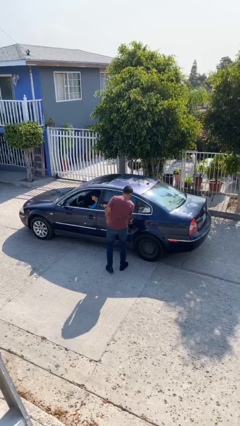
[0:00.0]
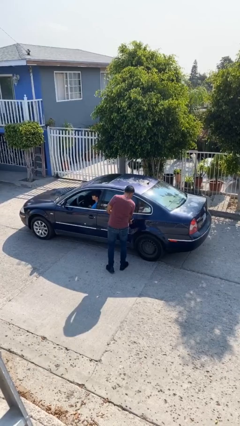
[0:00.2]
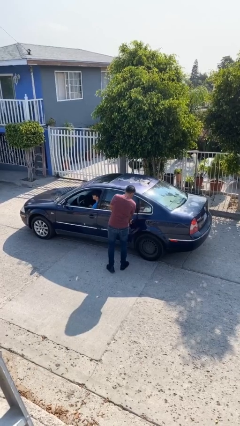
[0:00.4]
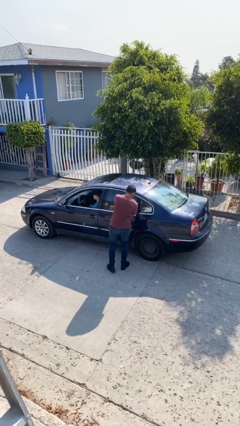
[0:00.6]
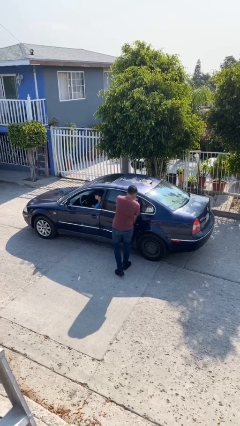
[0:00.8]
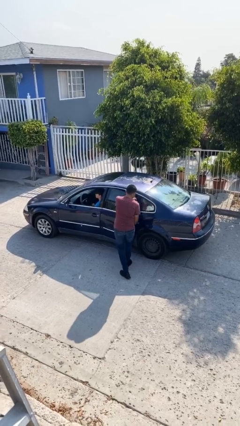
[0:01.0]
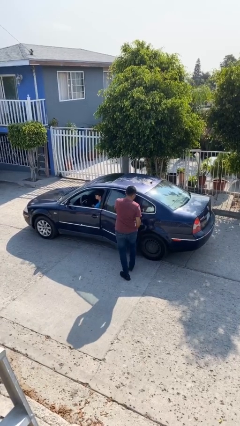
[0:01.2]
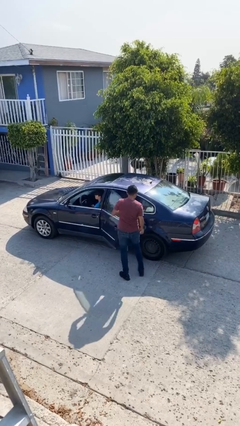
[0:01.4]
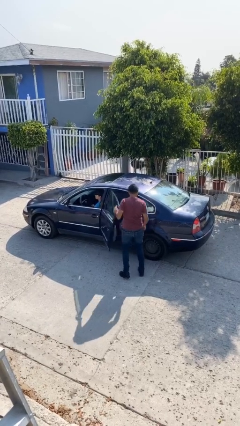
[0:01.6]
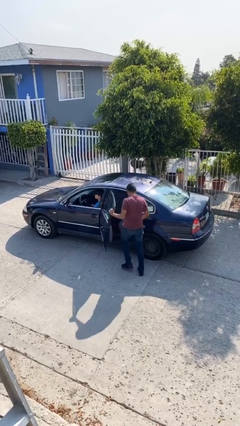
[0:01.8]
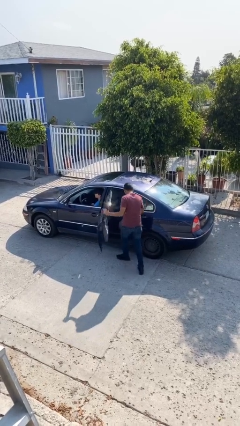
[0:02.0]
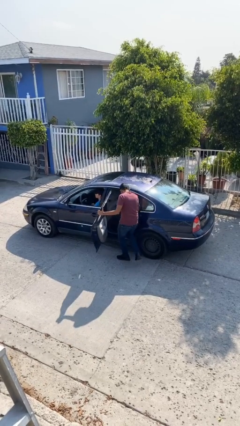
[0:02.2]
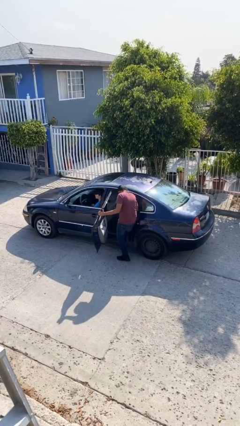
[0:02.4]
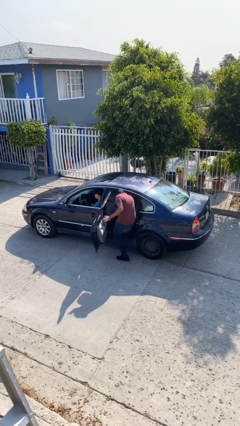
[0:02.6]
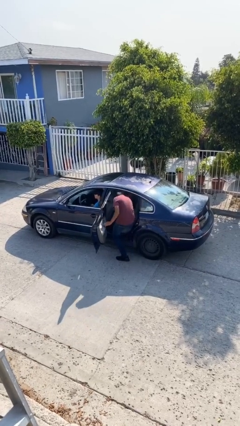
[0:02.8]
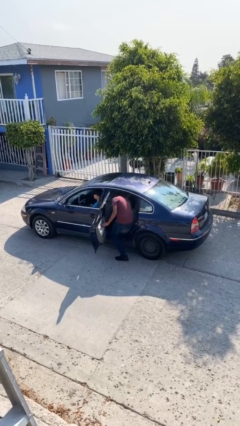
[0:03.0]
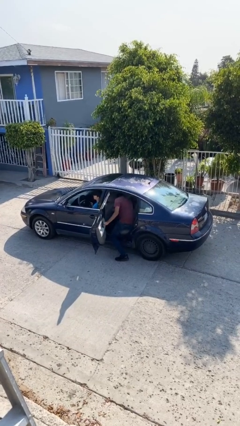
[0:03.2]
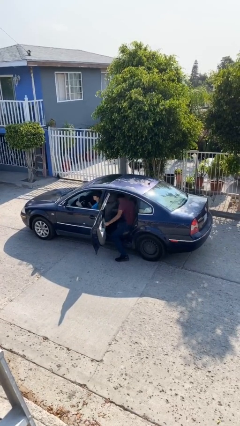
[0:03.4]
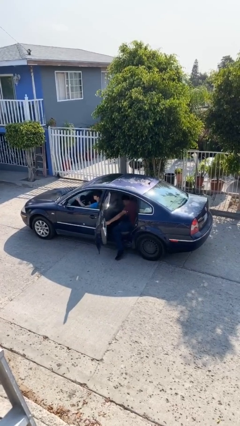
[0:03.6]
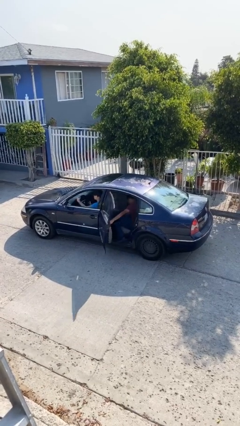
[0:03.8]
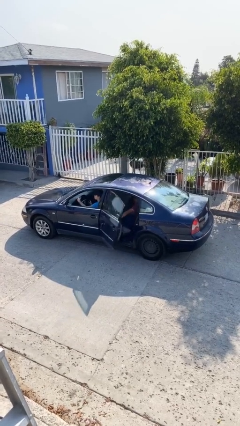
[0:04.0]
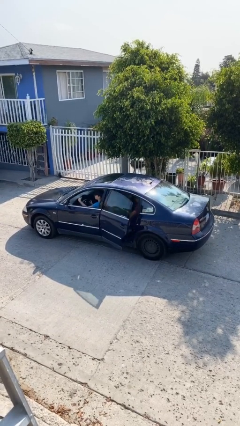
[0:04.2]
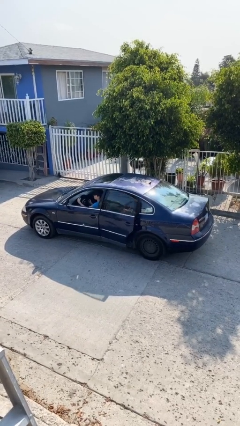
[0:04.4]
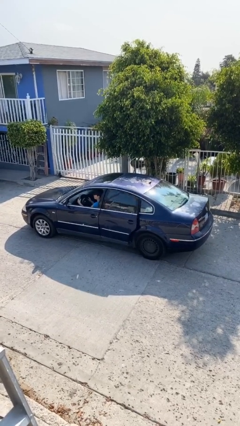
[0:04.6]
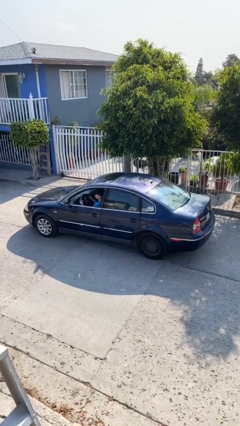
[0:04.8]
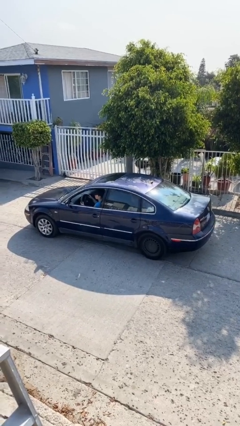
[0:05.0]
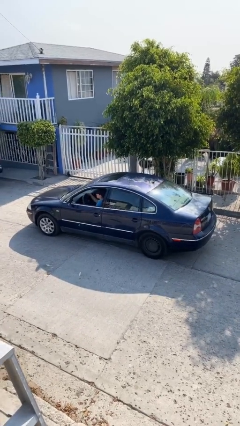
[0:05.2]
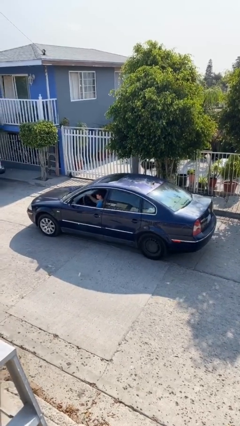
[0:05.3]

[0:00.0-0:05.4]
car picks up person

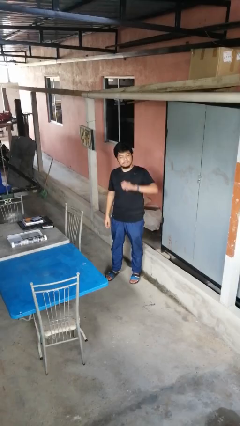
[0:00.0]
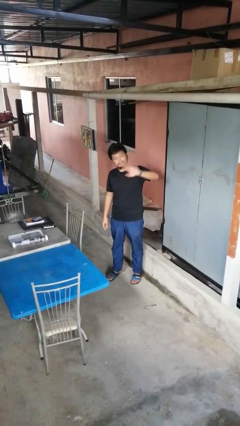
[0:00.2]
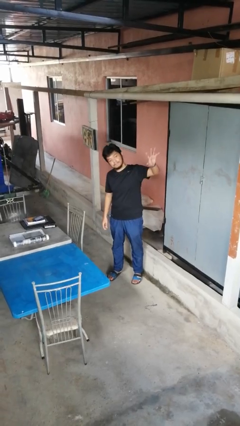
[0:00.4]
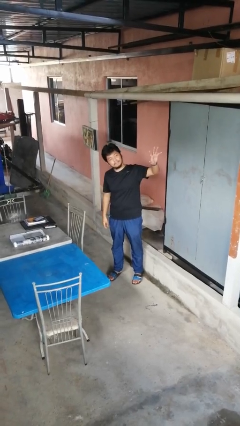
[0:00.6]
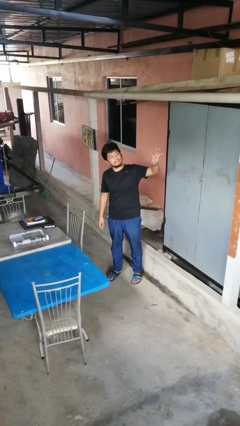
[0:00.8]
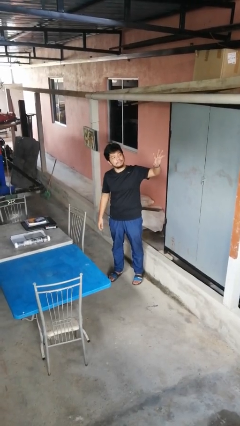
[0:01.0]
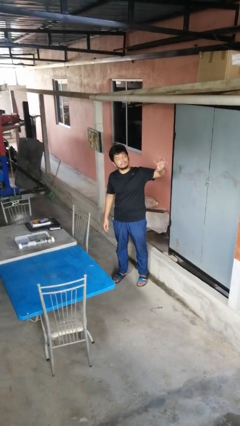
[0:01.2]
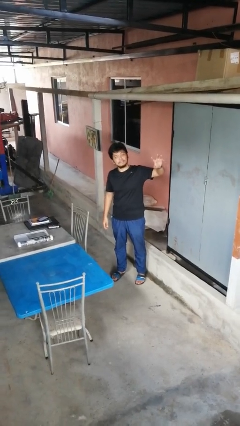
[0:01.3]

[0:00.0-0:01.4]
person gestures swipe left

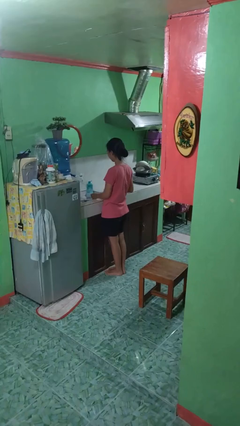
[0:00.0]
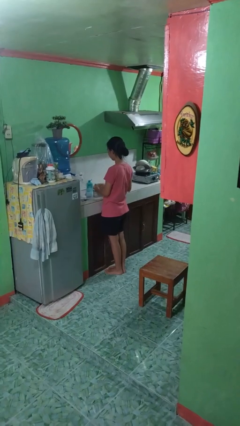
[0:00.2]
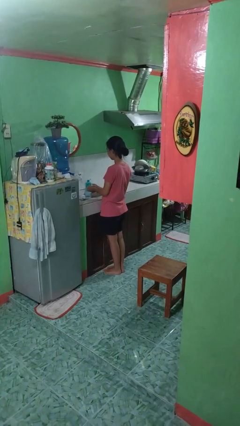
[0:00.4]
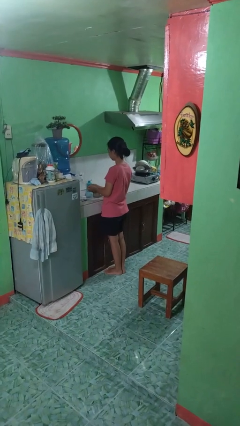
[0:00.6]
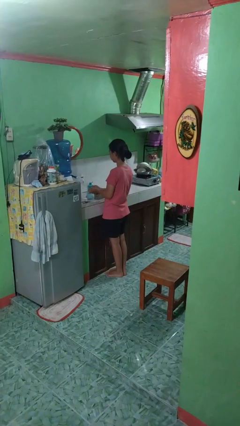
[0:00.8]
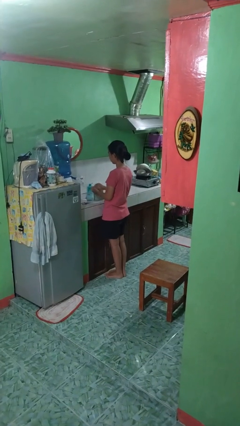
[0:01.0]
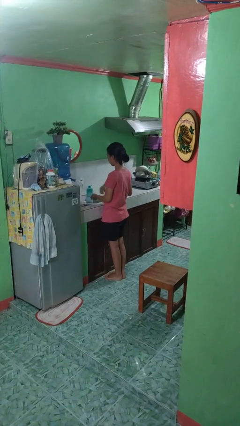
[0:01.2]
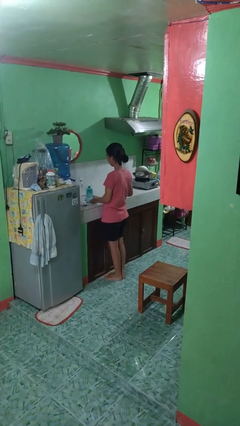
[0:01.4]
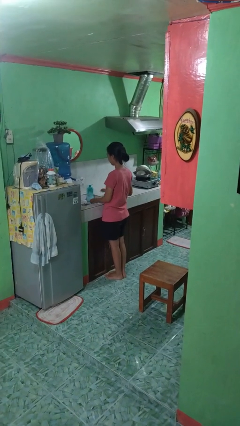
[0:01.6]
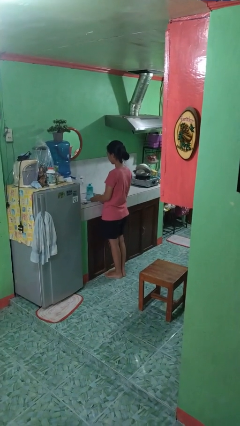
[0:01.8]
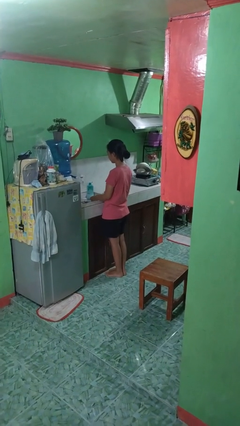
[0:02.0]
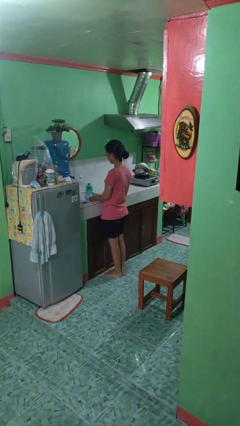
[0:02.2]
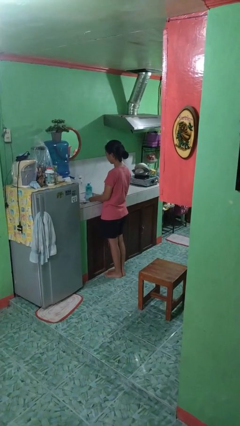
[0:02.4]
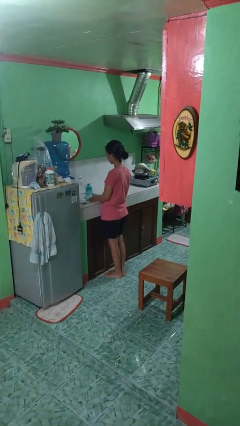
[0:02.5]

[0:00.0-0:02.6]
person dries hands with towel

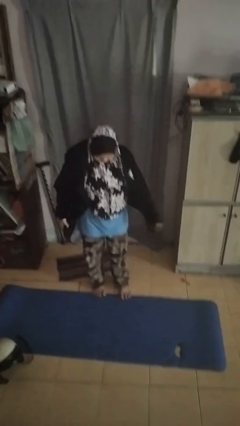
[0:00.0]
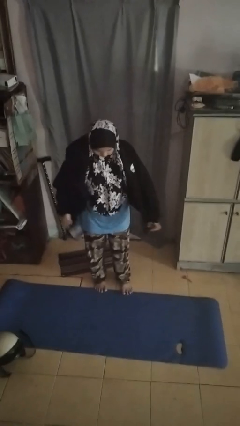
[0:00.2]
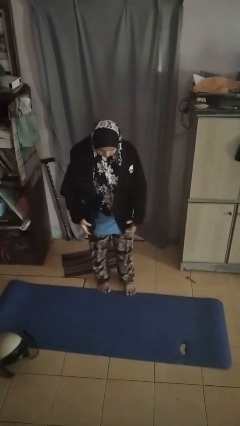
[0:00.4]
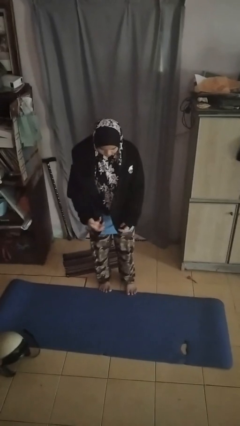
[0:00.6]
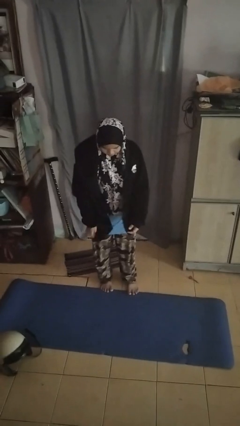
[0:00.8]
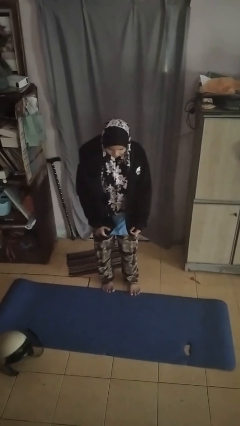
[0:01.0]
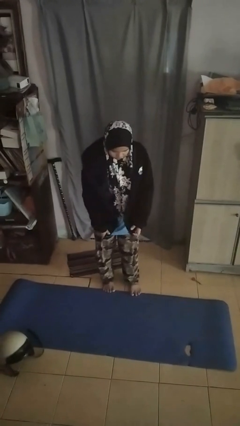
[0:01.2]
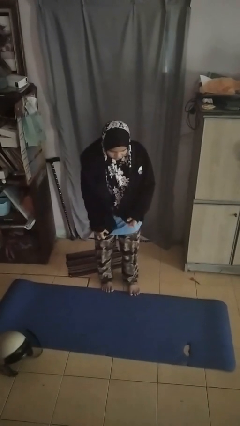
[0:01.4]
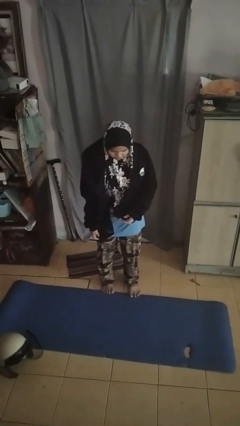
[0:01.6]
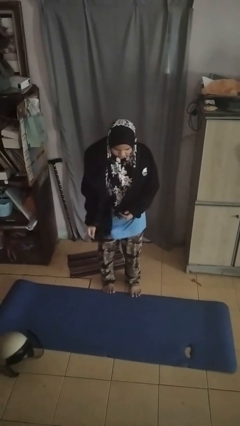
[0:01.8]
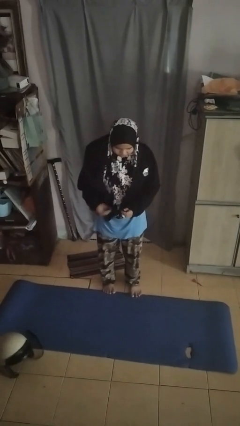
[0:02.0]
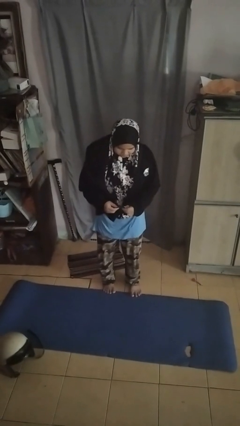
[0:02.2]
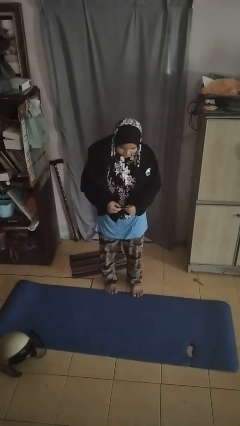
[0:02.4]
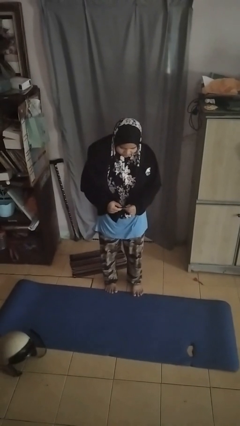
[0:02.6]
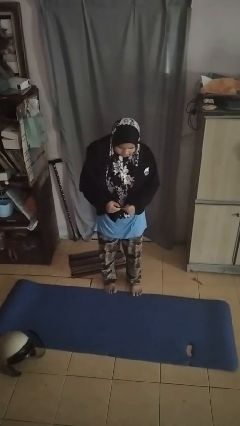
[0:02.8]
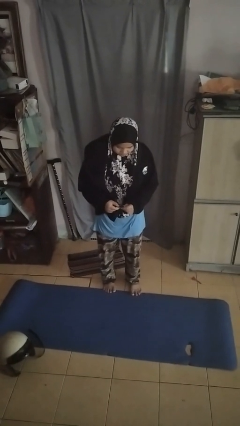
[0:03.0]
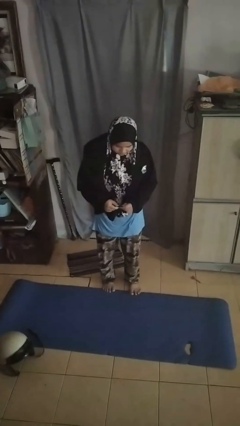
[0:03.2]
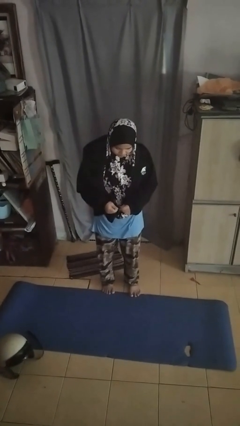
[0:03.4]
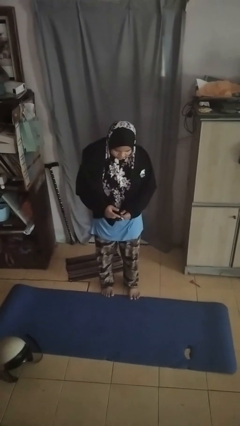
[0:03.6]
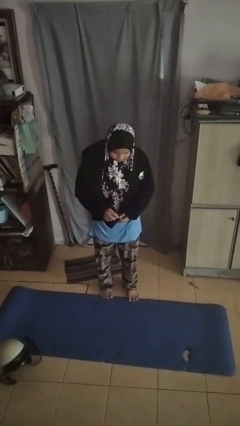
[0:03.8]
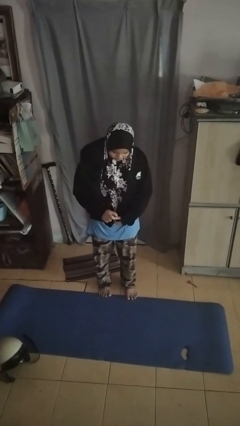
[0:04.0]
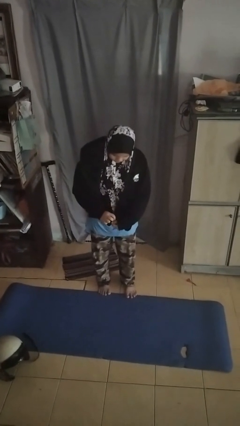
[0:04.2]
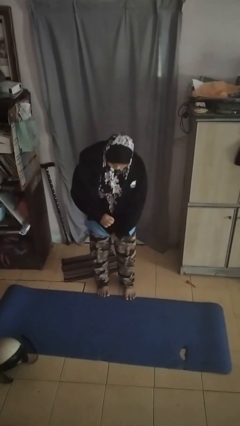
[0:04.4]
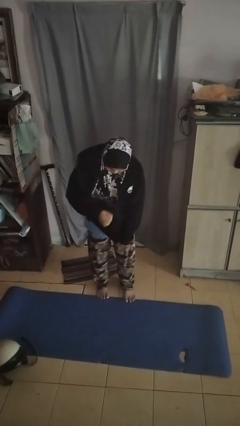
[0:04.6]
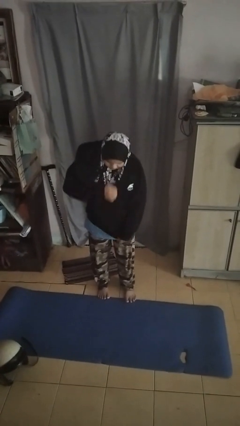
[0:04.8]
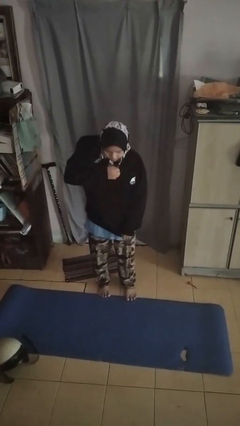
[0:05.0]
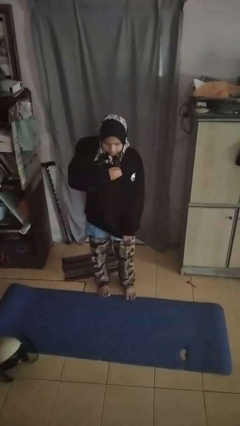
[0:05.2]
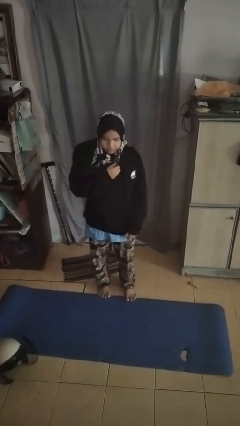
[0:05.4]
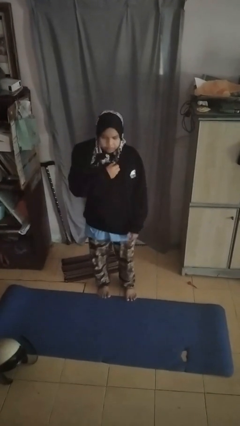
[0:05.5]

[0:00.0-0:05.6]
person zips up jacket

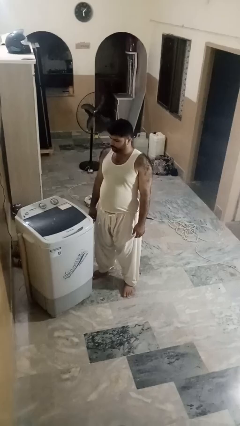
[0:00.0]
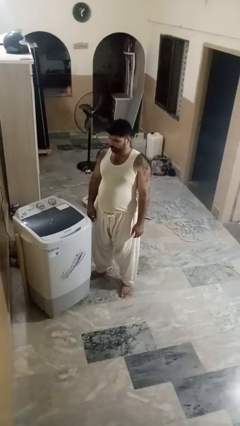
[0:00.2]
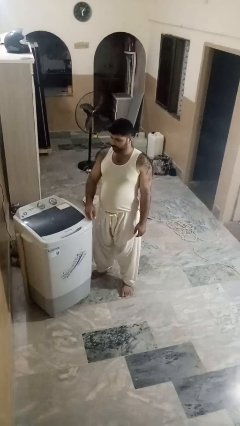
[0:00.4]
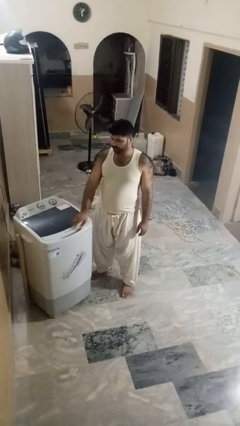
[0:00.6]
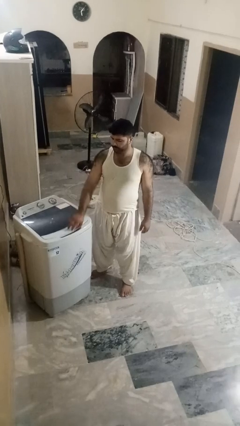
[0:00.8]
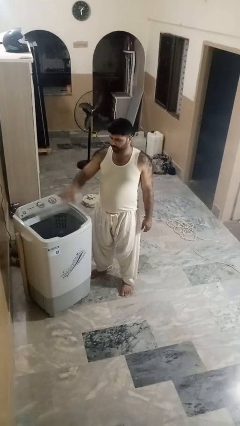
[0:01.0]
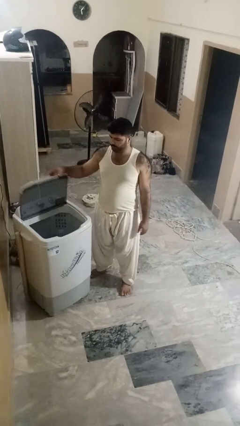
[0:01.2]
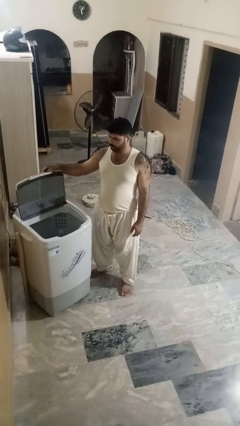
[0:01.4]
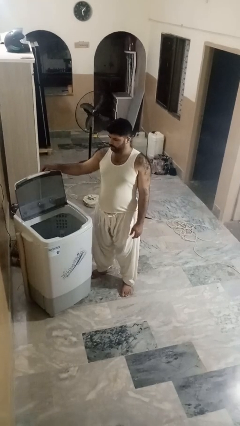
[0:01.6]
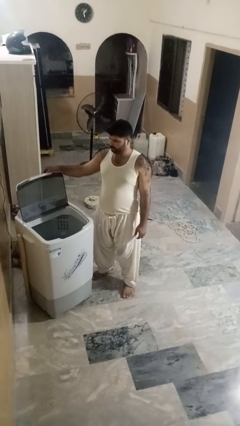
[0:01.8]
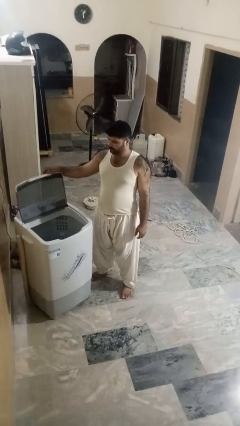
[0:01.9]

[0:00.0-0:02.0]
person opens clothes washer

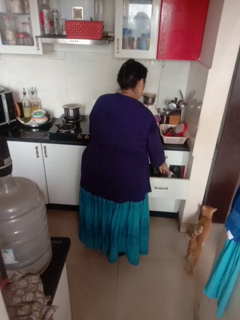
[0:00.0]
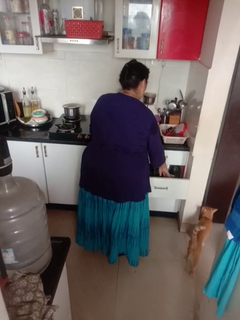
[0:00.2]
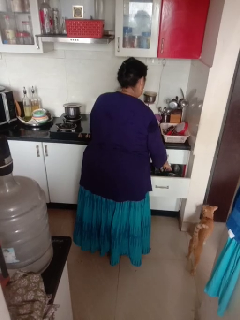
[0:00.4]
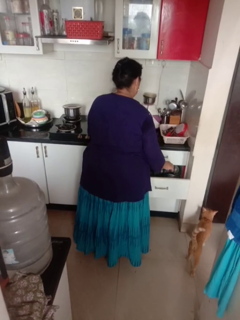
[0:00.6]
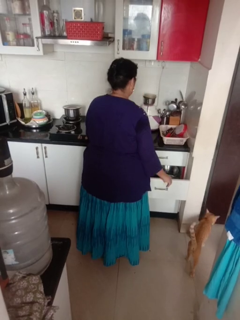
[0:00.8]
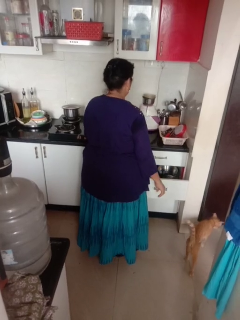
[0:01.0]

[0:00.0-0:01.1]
person puts object into kitchen drawer
